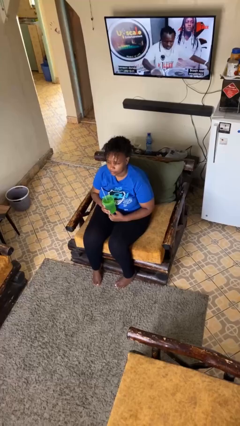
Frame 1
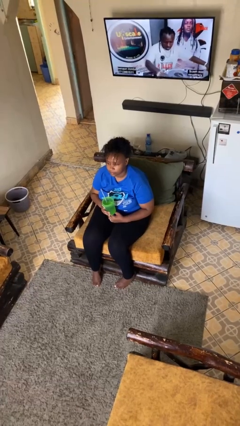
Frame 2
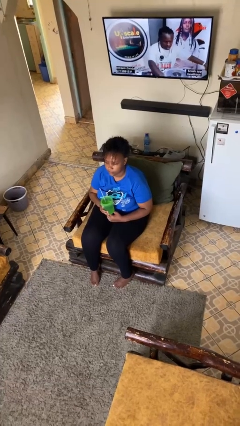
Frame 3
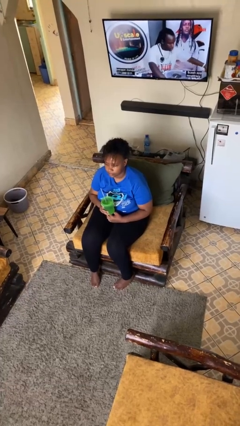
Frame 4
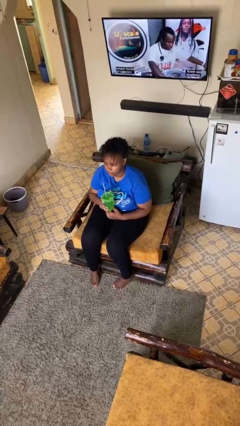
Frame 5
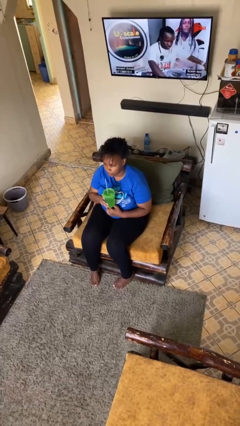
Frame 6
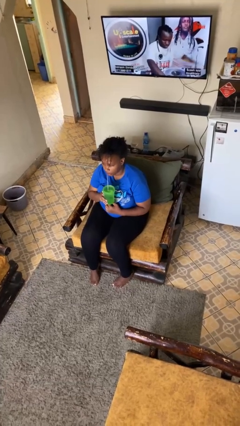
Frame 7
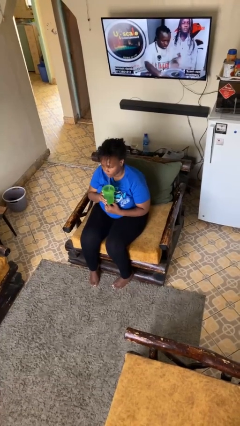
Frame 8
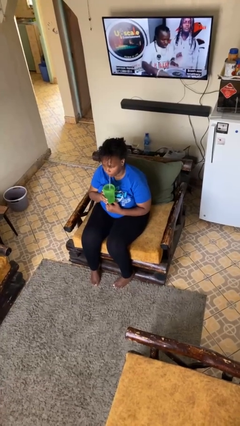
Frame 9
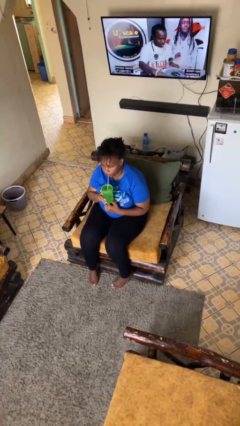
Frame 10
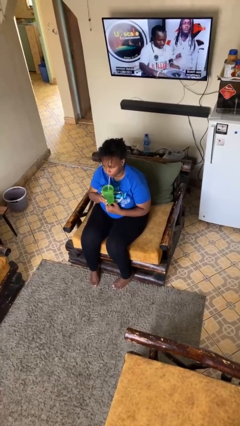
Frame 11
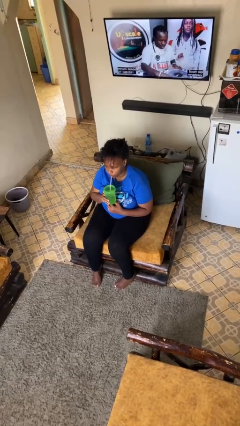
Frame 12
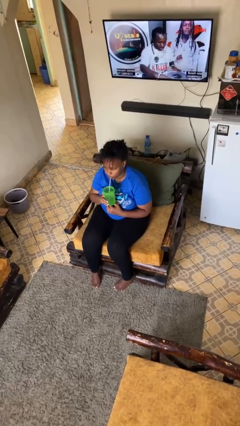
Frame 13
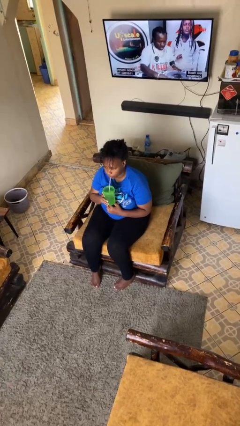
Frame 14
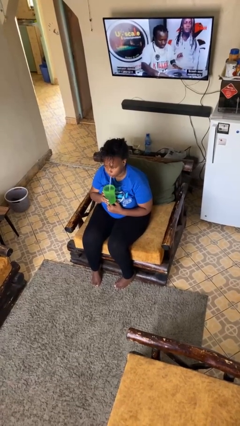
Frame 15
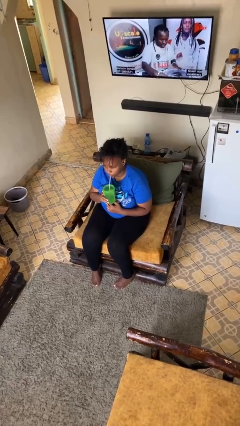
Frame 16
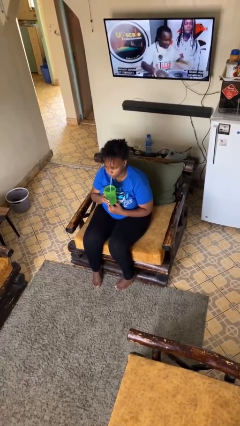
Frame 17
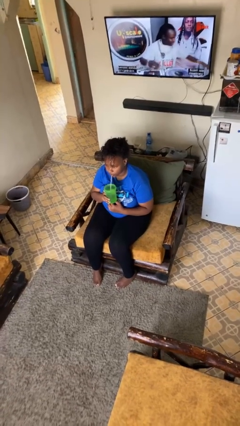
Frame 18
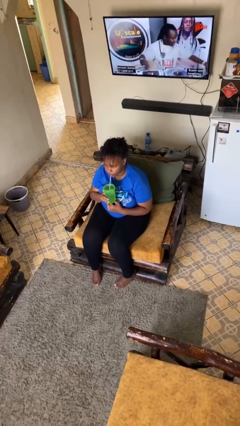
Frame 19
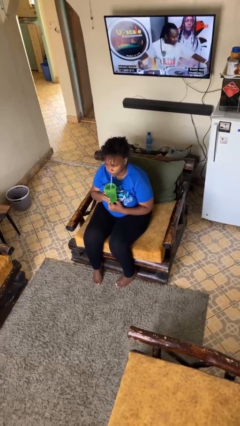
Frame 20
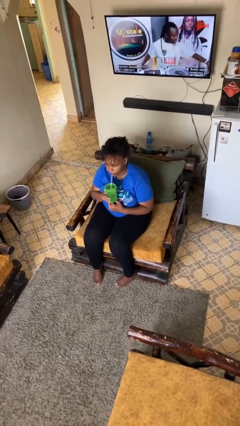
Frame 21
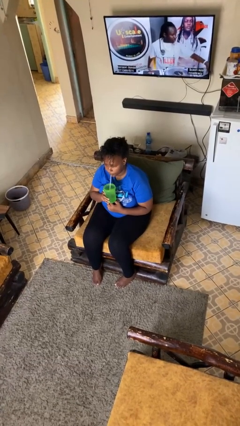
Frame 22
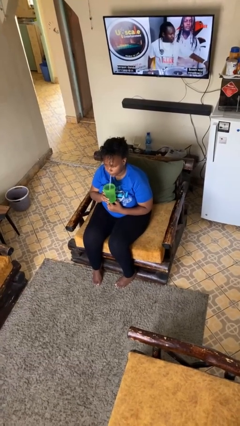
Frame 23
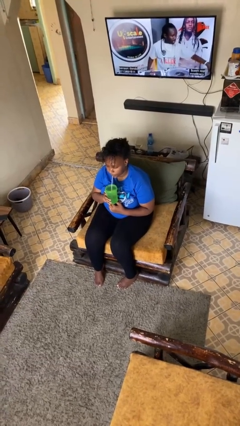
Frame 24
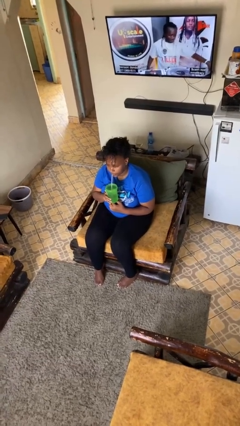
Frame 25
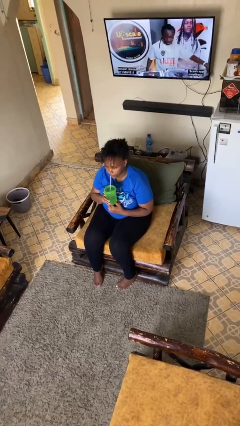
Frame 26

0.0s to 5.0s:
person drinks from straw

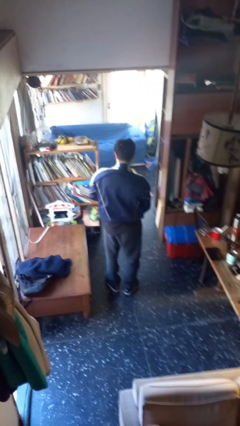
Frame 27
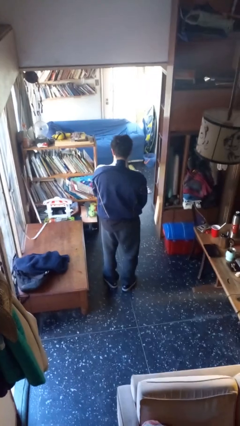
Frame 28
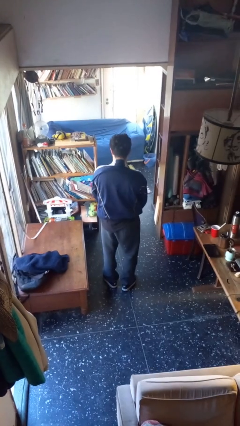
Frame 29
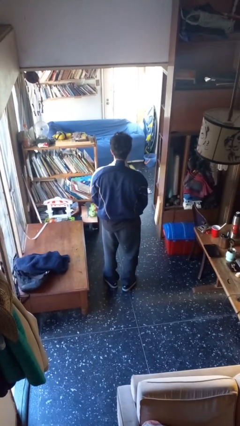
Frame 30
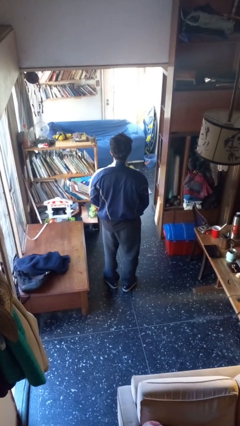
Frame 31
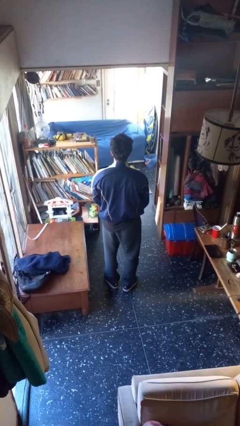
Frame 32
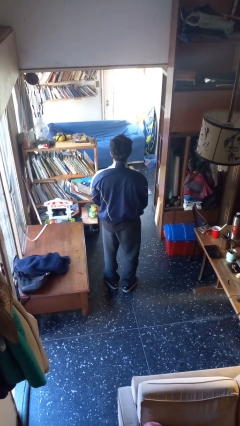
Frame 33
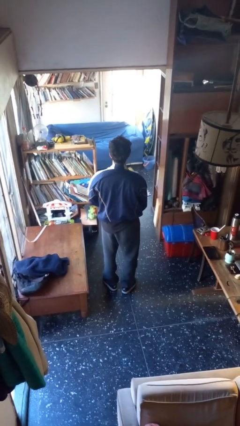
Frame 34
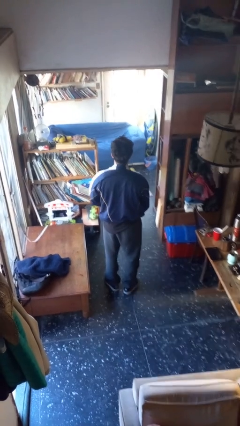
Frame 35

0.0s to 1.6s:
person unzips jacket

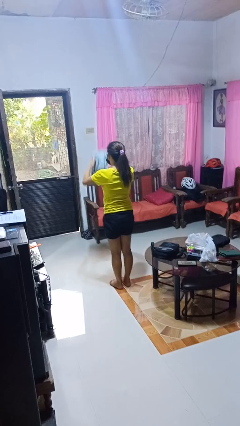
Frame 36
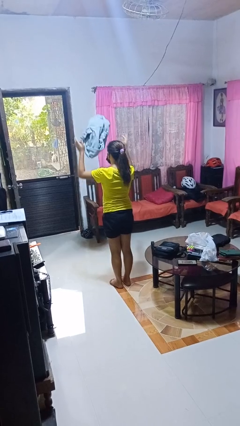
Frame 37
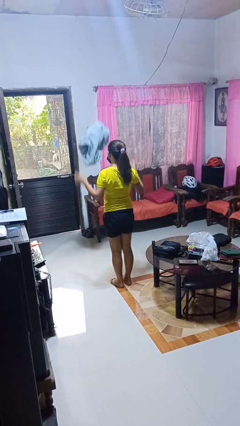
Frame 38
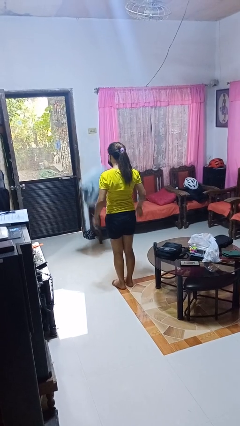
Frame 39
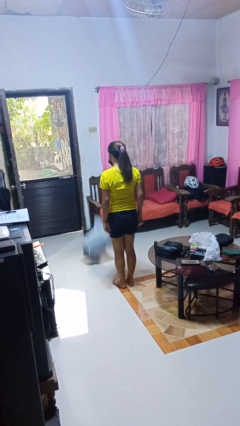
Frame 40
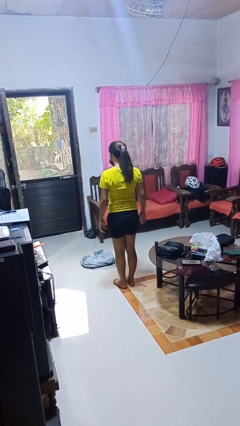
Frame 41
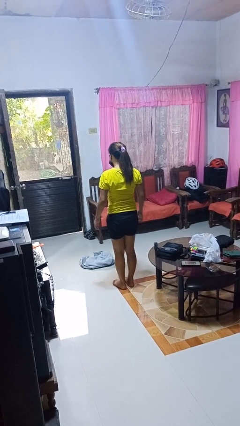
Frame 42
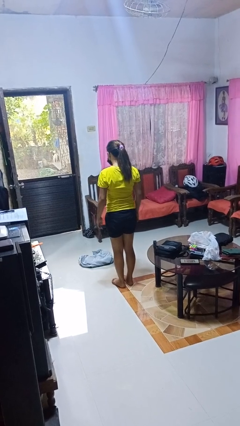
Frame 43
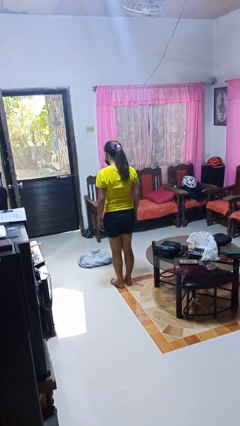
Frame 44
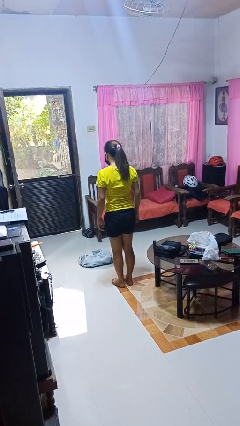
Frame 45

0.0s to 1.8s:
person throws object into air

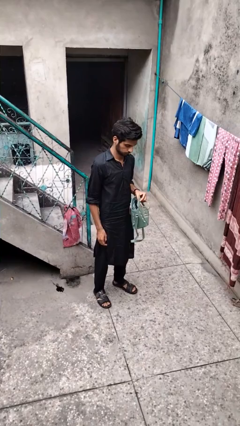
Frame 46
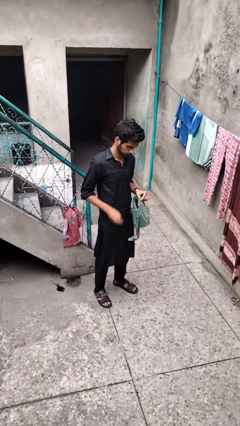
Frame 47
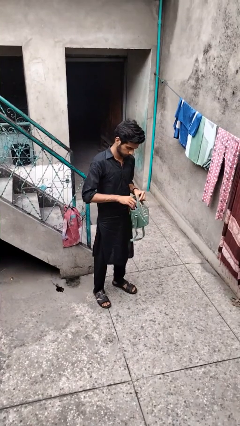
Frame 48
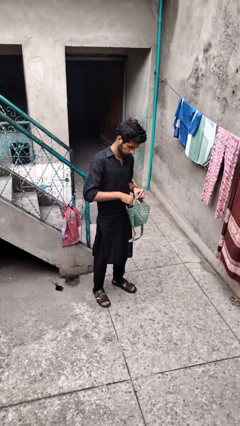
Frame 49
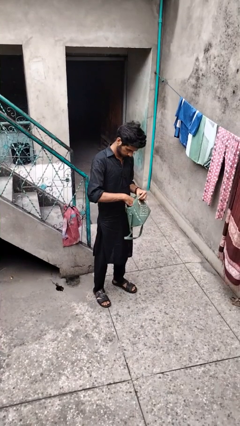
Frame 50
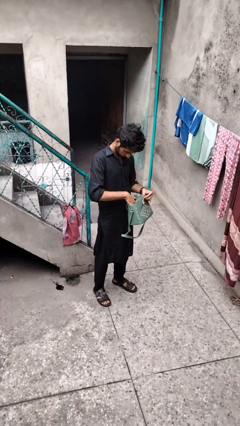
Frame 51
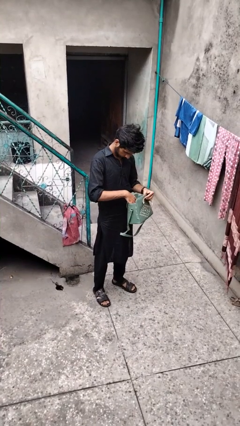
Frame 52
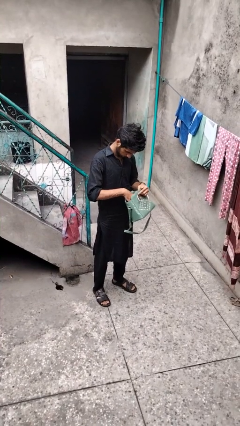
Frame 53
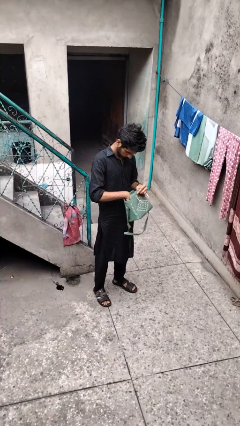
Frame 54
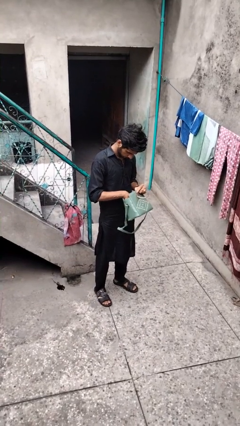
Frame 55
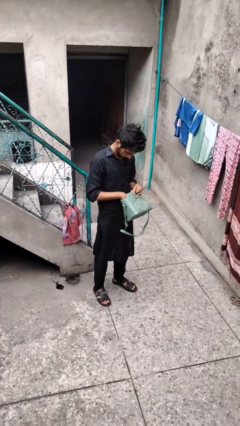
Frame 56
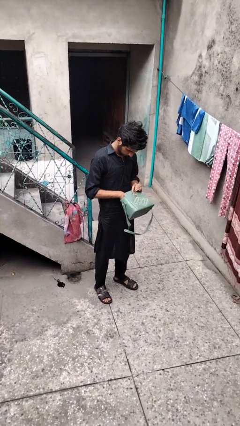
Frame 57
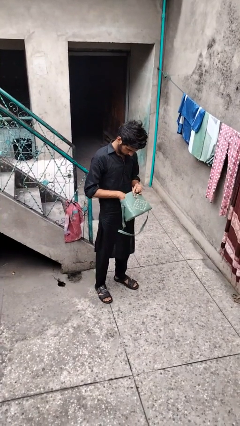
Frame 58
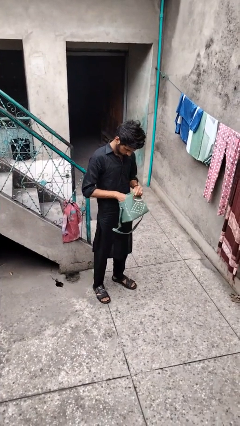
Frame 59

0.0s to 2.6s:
person searches in purse

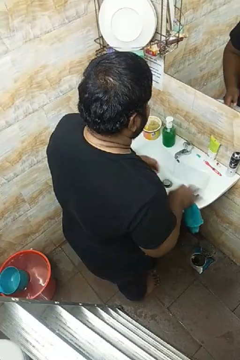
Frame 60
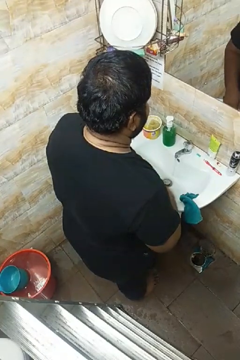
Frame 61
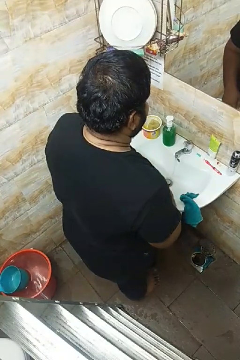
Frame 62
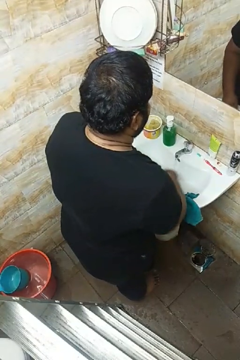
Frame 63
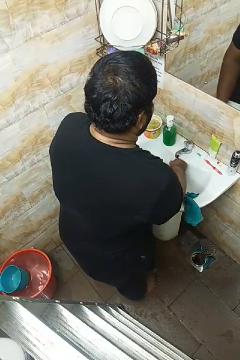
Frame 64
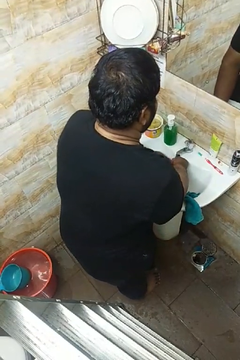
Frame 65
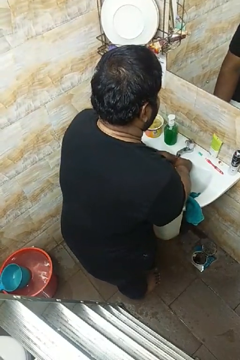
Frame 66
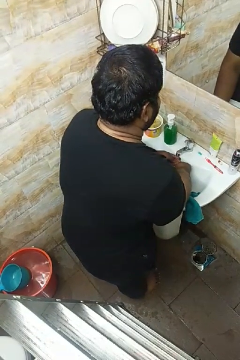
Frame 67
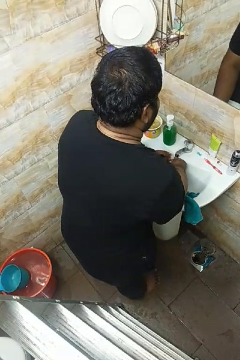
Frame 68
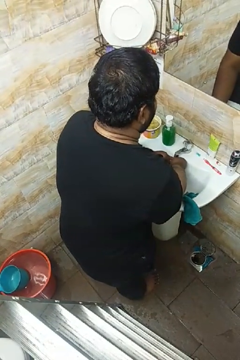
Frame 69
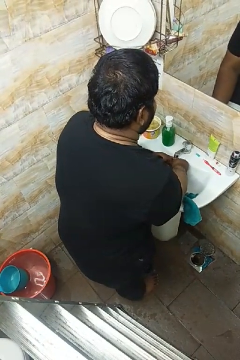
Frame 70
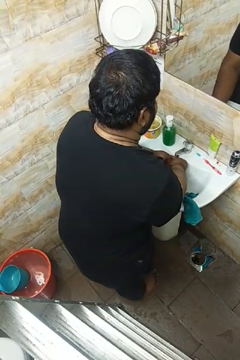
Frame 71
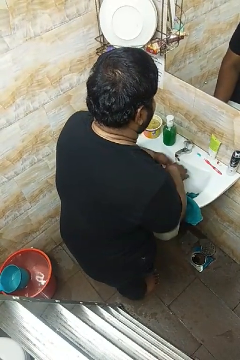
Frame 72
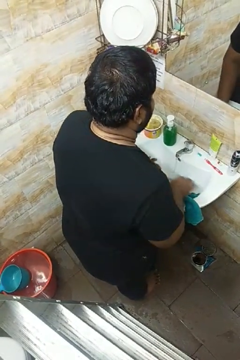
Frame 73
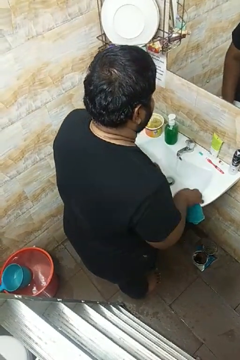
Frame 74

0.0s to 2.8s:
person washes hands

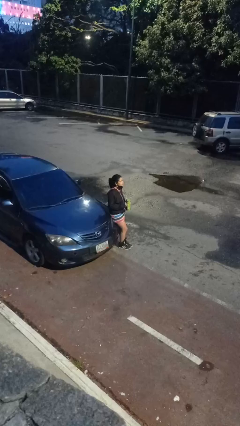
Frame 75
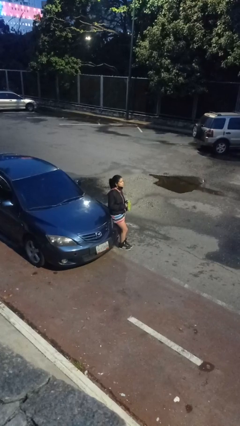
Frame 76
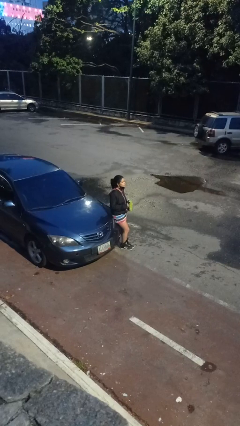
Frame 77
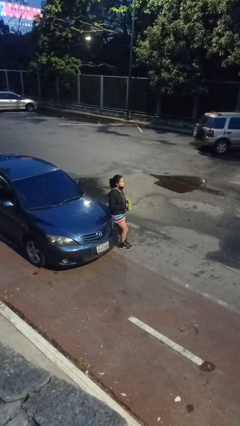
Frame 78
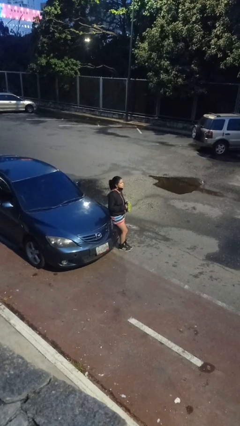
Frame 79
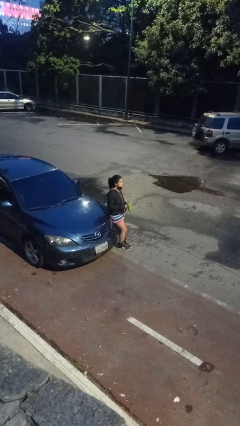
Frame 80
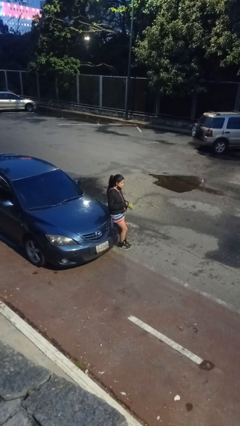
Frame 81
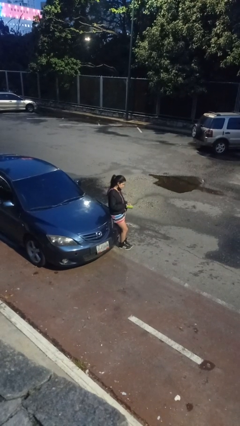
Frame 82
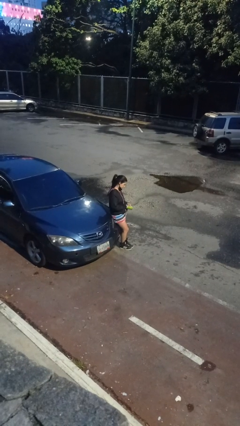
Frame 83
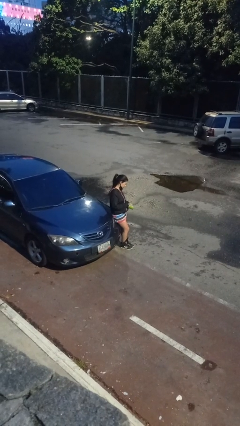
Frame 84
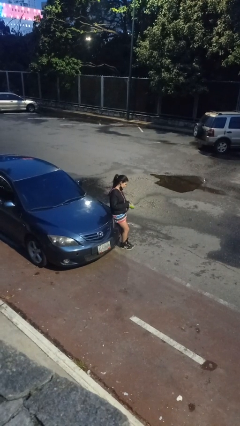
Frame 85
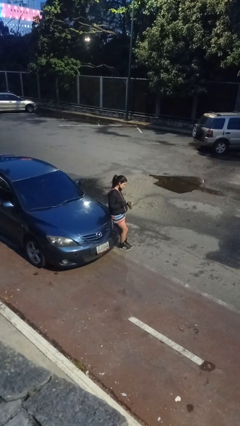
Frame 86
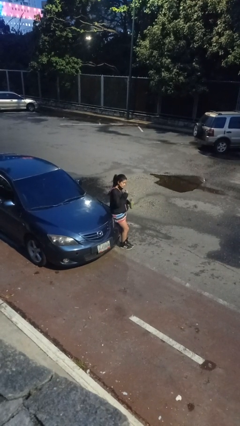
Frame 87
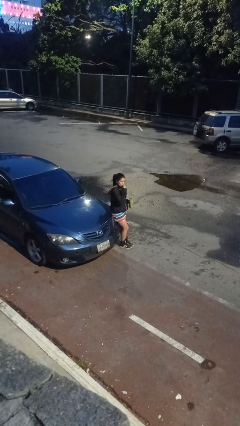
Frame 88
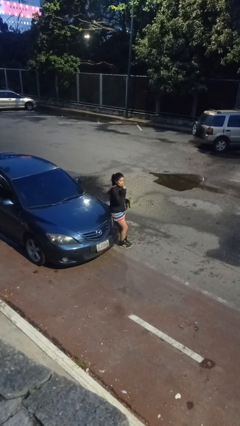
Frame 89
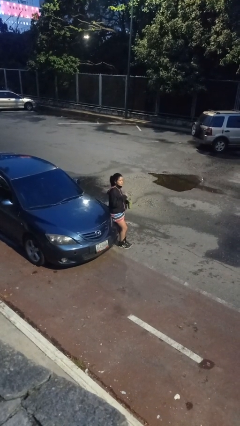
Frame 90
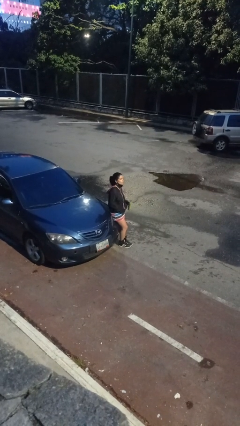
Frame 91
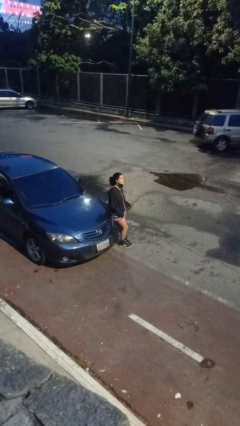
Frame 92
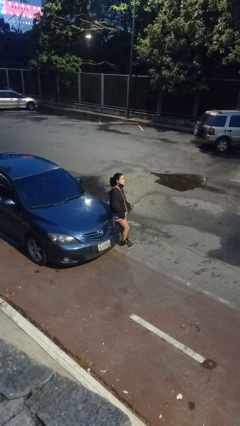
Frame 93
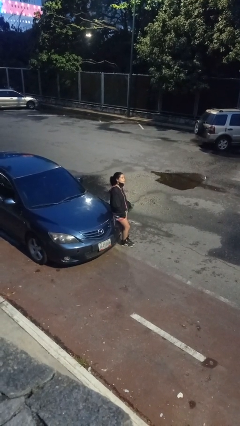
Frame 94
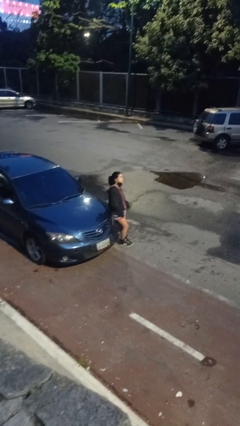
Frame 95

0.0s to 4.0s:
person eats snack from bag
